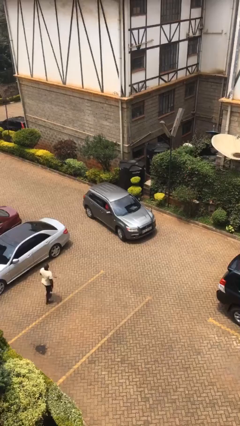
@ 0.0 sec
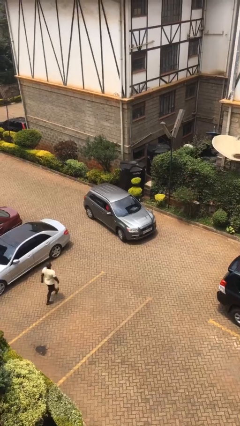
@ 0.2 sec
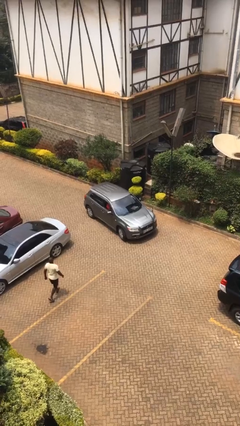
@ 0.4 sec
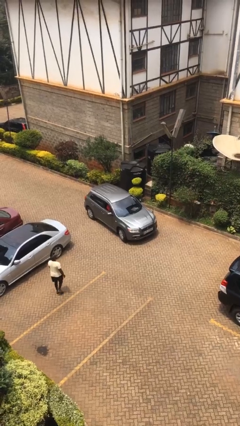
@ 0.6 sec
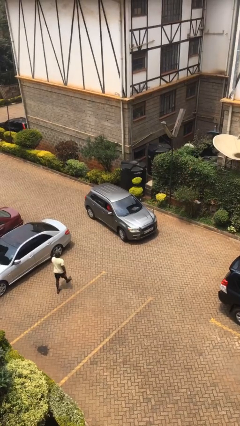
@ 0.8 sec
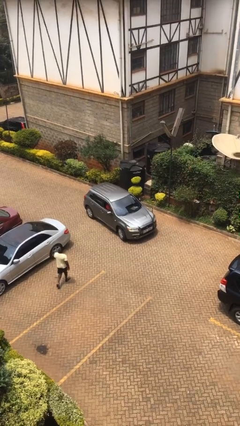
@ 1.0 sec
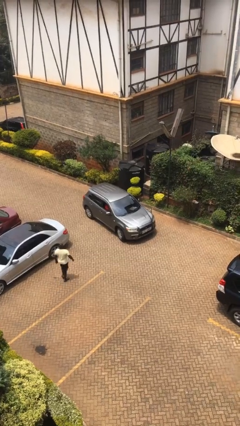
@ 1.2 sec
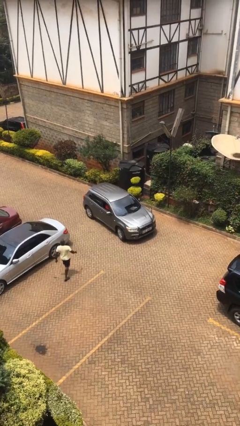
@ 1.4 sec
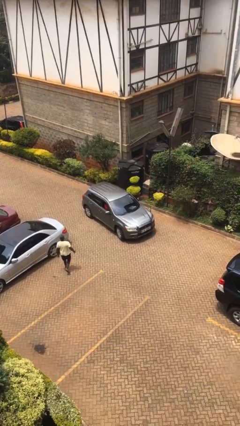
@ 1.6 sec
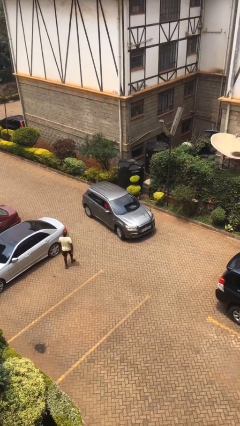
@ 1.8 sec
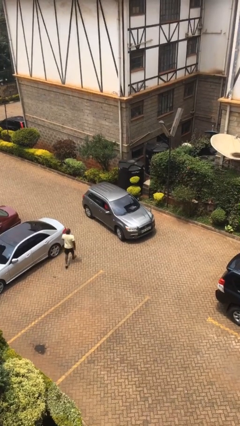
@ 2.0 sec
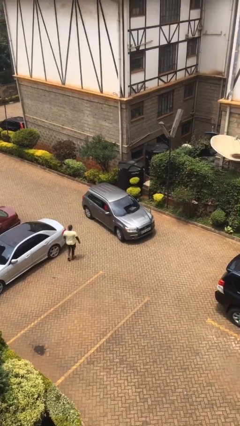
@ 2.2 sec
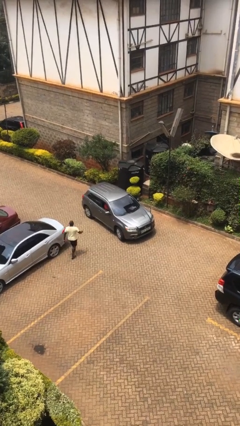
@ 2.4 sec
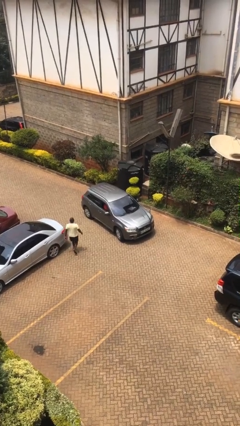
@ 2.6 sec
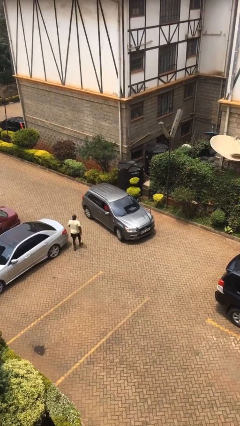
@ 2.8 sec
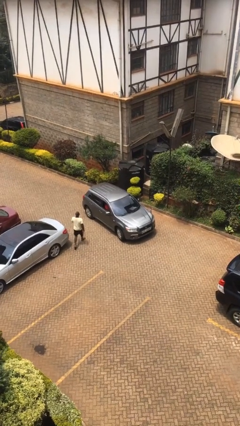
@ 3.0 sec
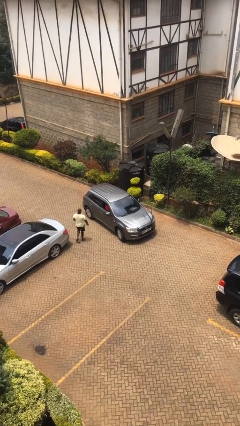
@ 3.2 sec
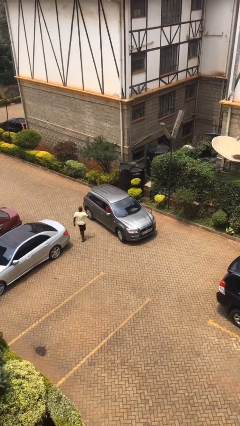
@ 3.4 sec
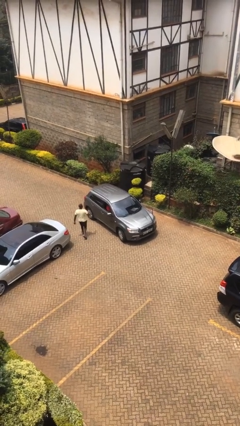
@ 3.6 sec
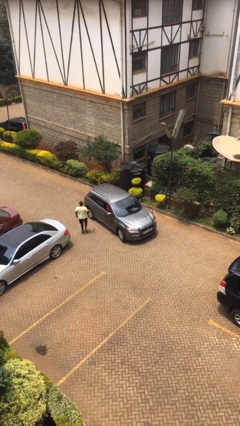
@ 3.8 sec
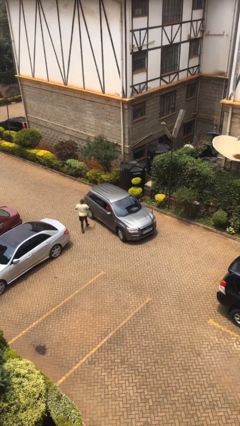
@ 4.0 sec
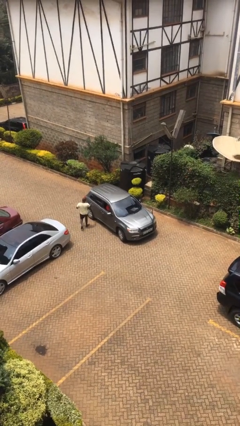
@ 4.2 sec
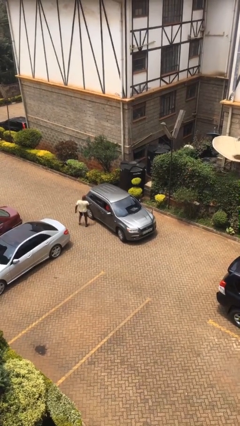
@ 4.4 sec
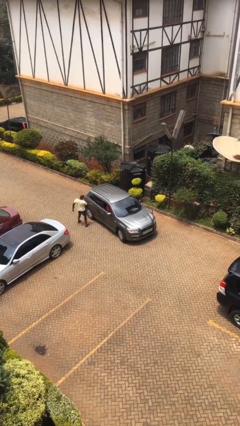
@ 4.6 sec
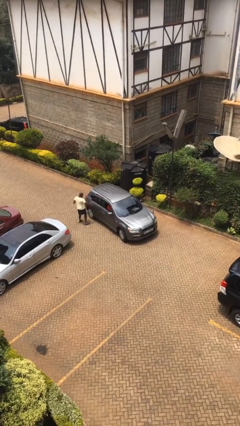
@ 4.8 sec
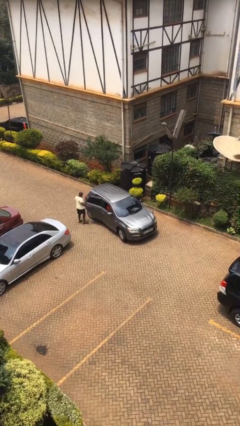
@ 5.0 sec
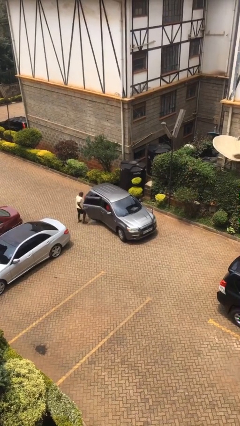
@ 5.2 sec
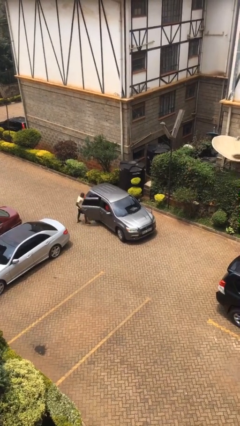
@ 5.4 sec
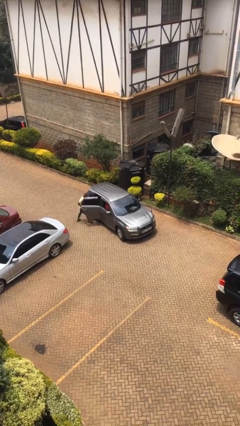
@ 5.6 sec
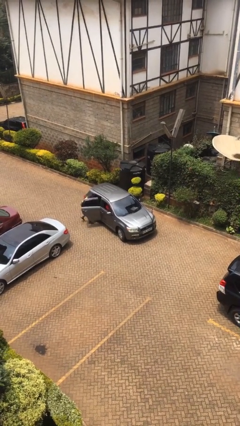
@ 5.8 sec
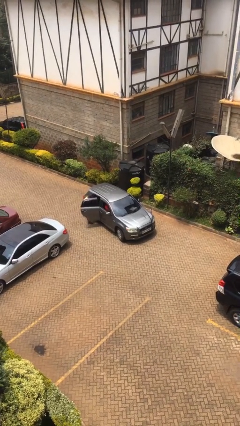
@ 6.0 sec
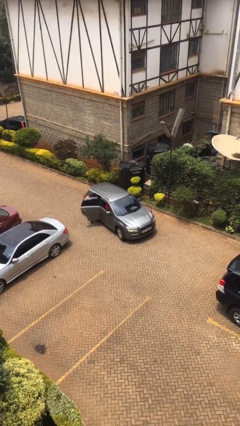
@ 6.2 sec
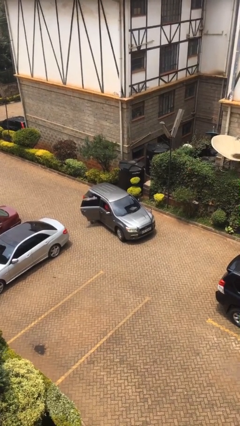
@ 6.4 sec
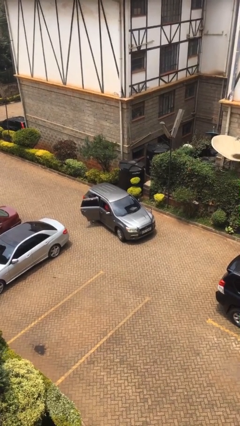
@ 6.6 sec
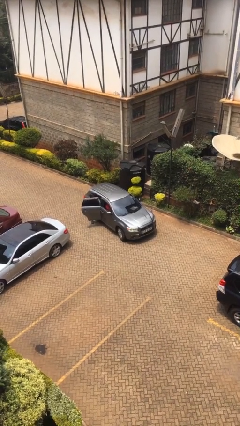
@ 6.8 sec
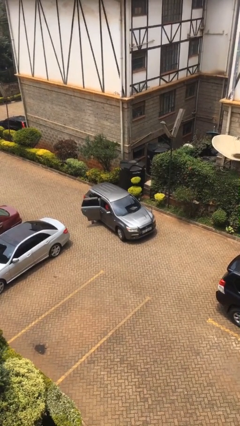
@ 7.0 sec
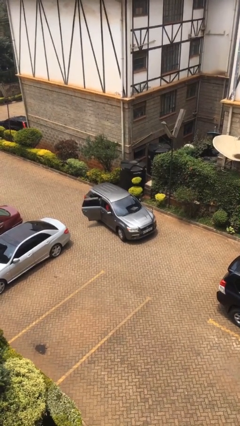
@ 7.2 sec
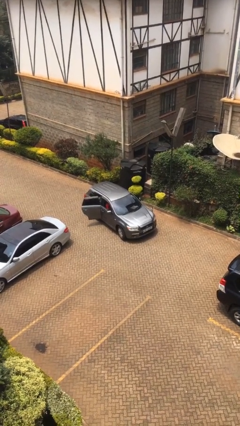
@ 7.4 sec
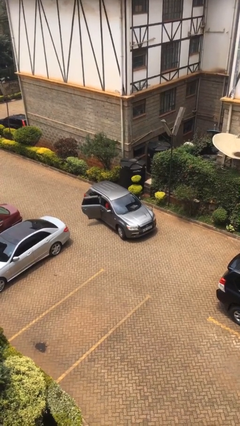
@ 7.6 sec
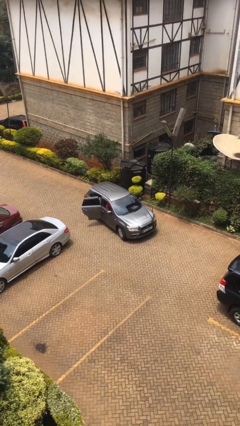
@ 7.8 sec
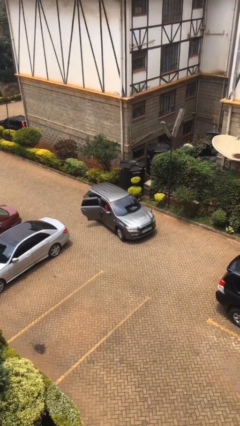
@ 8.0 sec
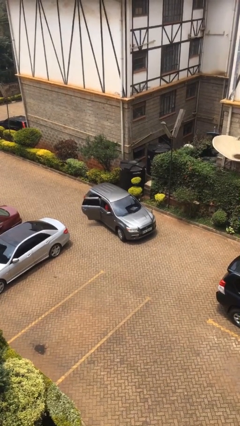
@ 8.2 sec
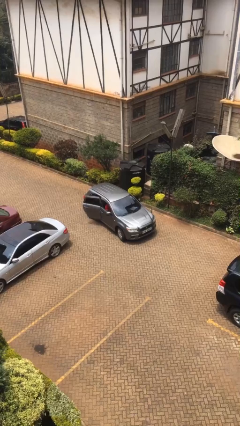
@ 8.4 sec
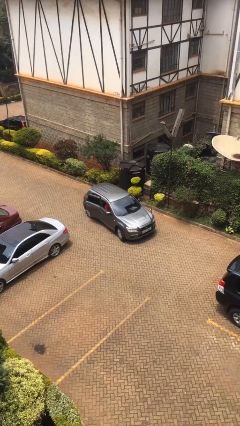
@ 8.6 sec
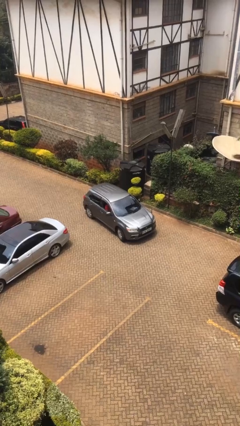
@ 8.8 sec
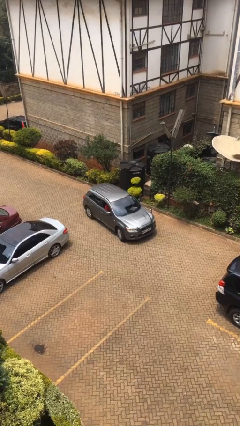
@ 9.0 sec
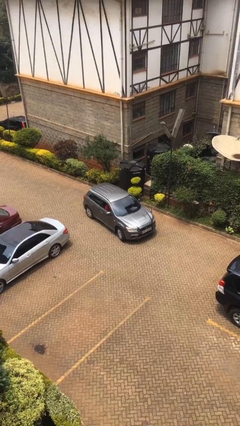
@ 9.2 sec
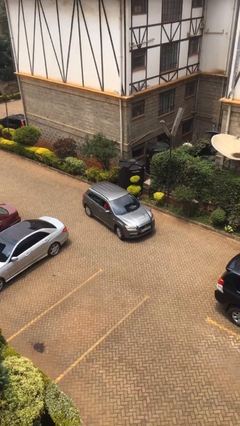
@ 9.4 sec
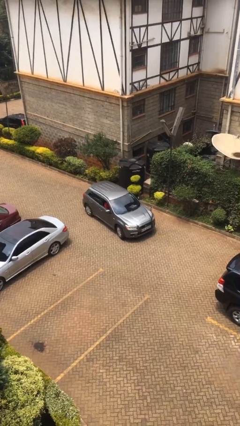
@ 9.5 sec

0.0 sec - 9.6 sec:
car picks up person

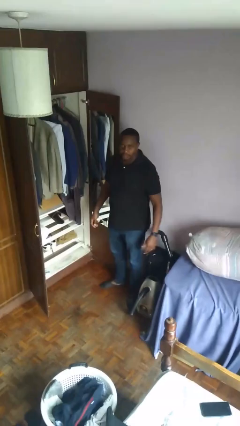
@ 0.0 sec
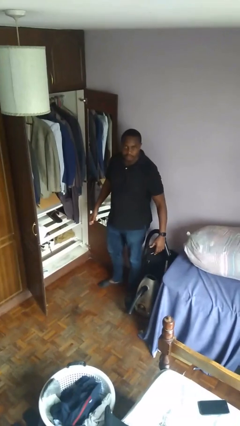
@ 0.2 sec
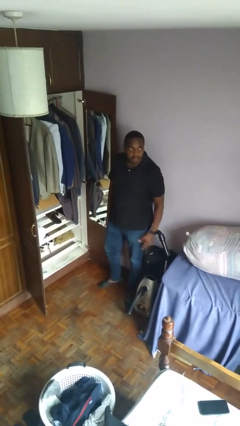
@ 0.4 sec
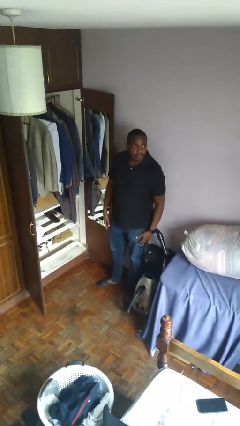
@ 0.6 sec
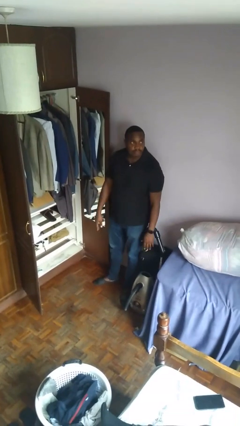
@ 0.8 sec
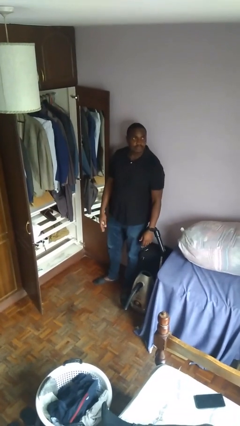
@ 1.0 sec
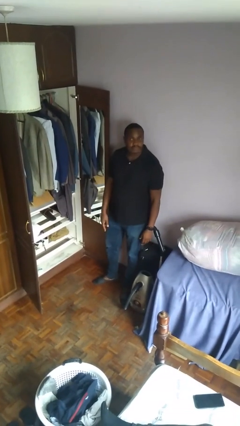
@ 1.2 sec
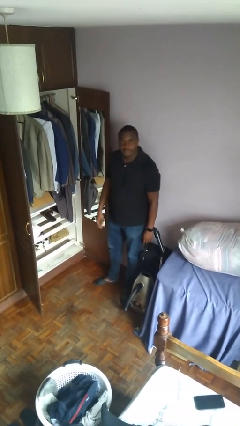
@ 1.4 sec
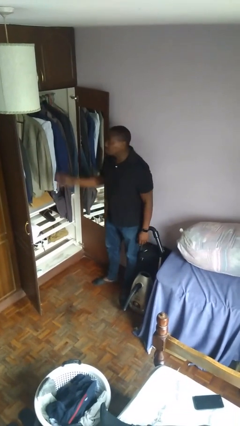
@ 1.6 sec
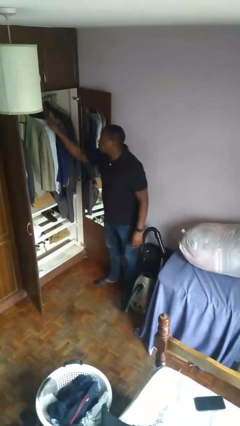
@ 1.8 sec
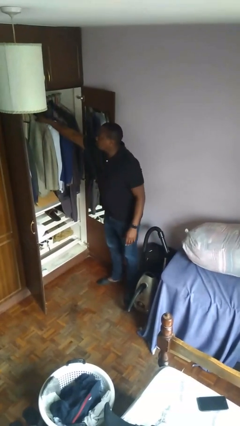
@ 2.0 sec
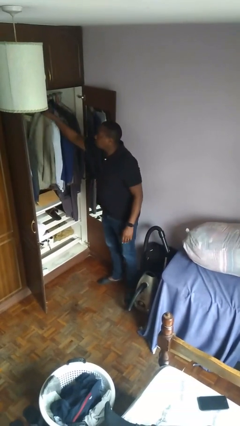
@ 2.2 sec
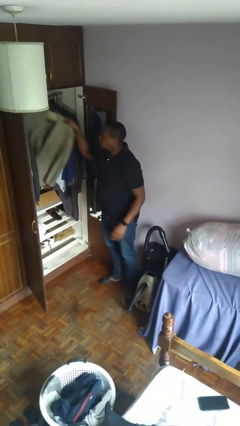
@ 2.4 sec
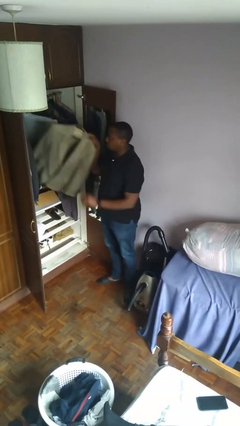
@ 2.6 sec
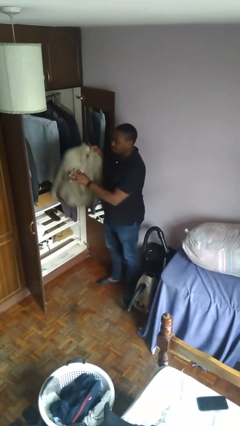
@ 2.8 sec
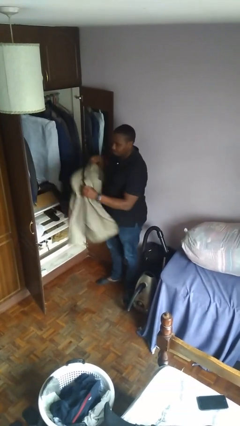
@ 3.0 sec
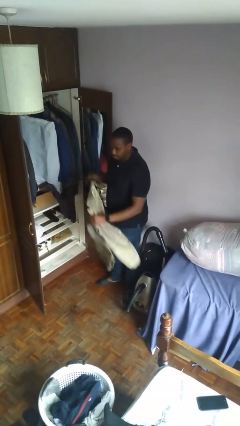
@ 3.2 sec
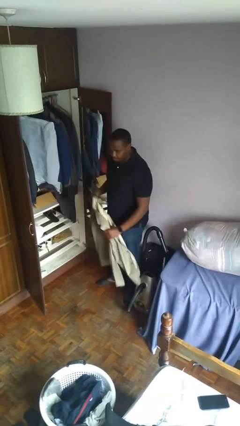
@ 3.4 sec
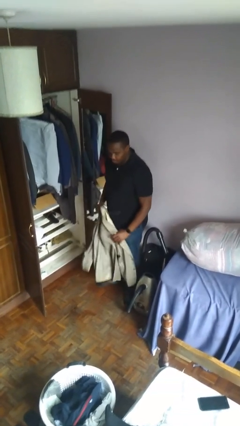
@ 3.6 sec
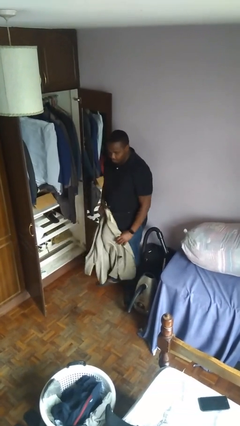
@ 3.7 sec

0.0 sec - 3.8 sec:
person takes clothes from closet

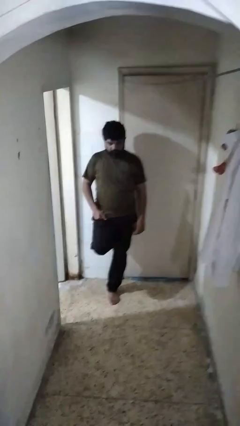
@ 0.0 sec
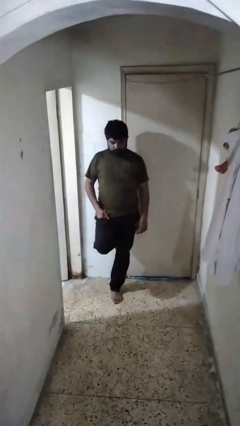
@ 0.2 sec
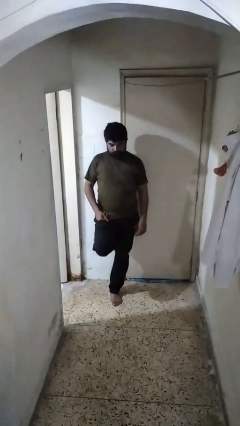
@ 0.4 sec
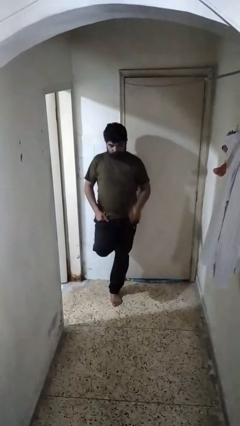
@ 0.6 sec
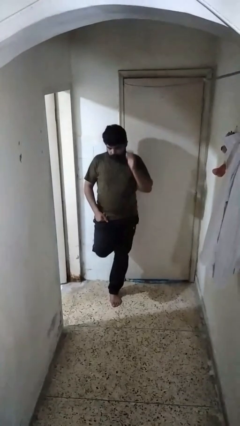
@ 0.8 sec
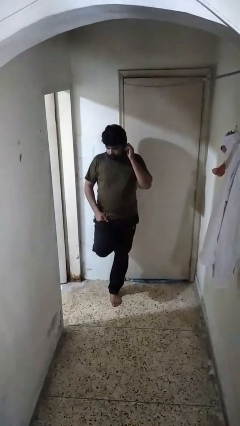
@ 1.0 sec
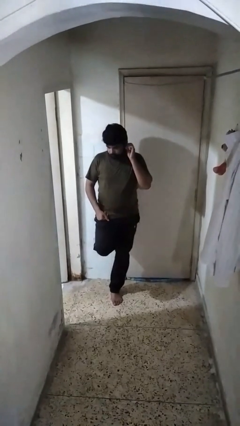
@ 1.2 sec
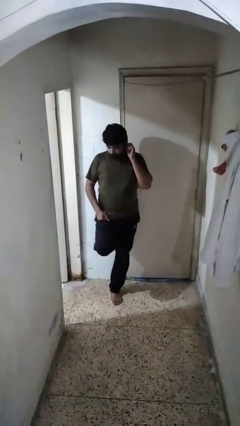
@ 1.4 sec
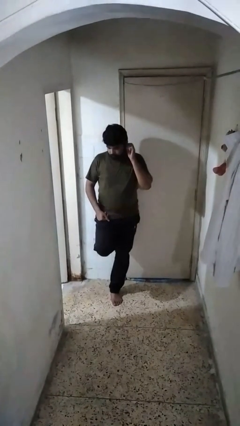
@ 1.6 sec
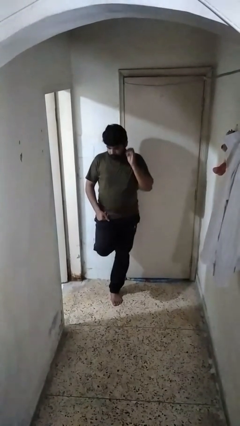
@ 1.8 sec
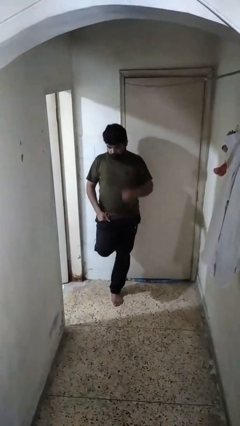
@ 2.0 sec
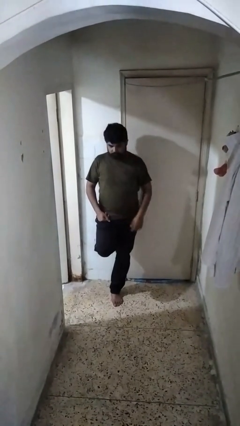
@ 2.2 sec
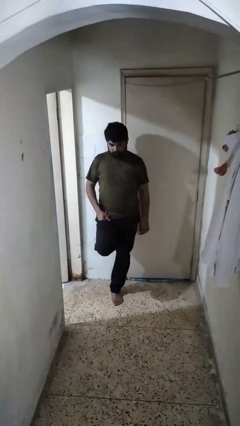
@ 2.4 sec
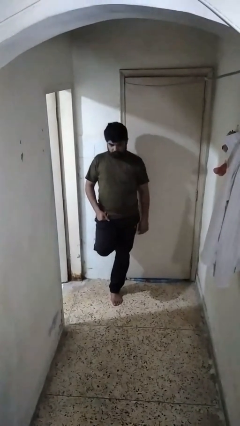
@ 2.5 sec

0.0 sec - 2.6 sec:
person touches earlobe

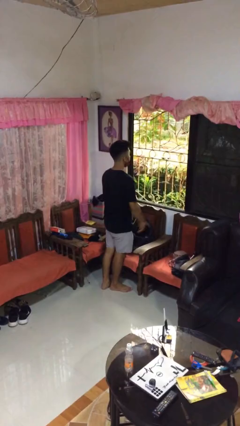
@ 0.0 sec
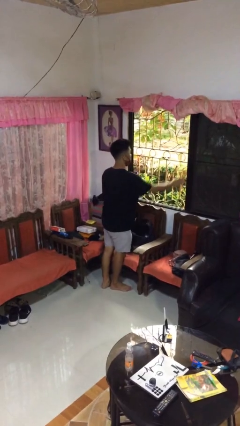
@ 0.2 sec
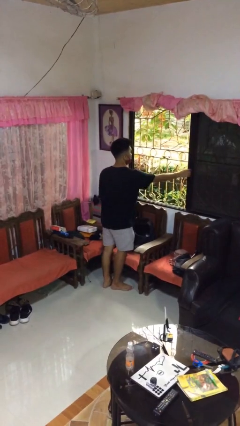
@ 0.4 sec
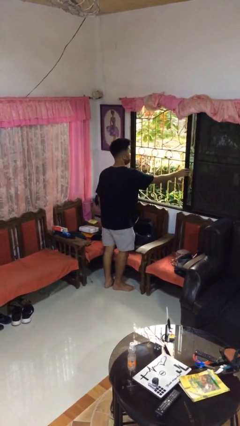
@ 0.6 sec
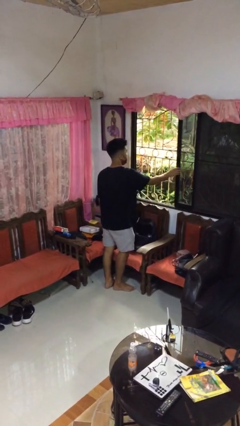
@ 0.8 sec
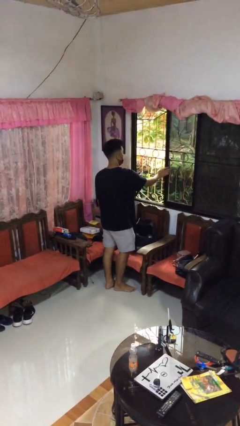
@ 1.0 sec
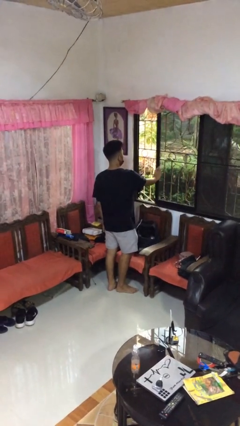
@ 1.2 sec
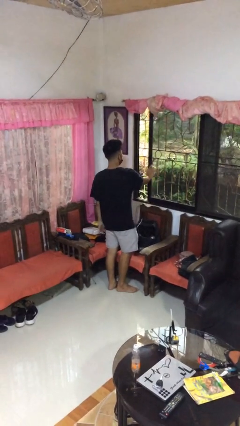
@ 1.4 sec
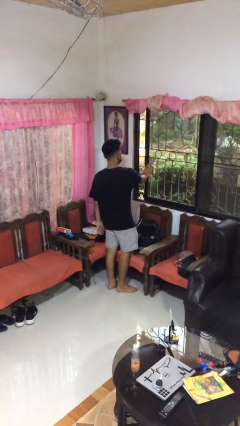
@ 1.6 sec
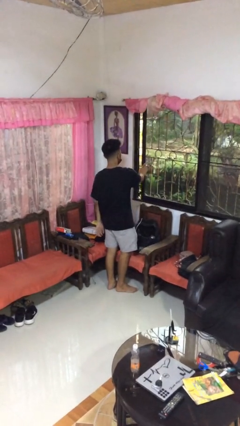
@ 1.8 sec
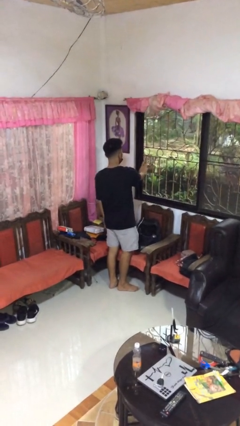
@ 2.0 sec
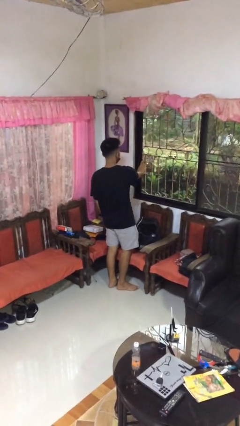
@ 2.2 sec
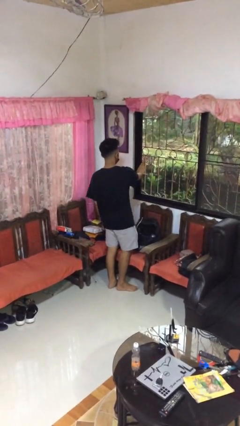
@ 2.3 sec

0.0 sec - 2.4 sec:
person closes home window
